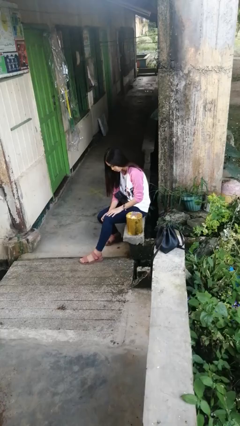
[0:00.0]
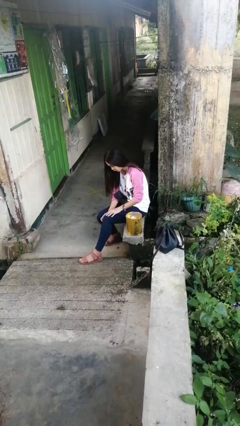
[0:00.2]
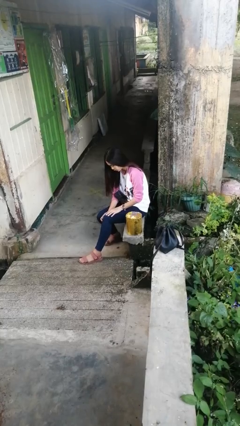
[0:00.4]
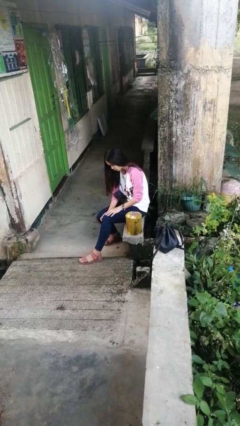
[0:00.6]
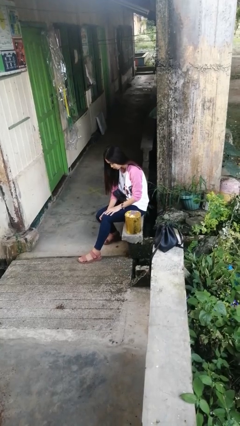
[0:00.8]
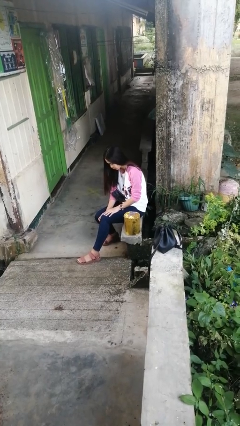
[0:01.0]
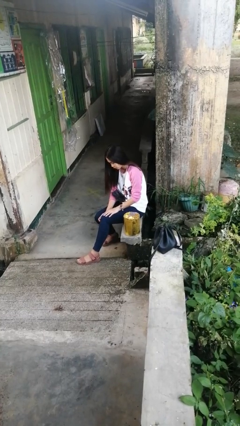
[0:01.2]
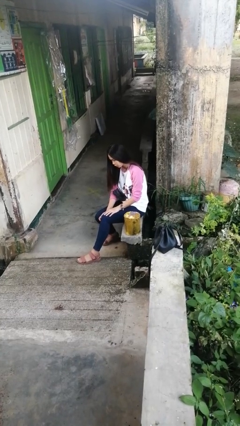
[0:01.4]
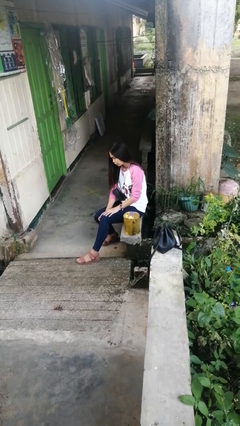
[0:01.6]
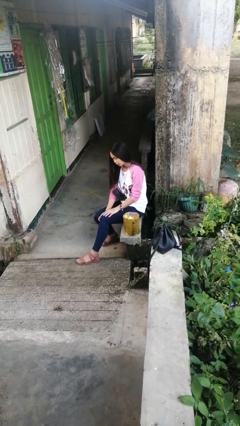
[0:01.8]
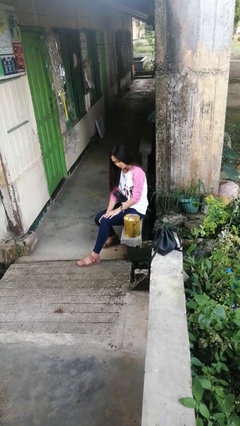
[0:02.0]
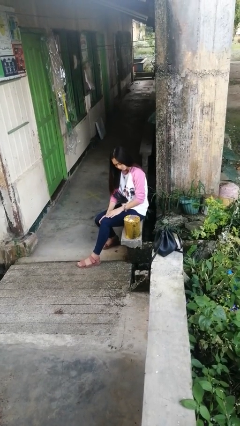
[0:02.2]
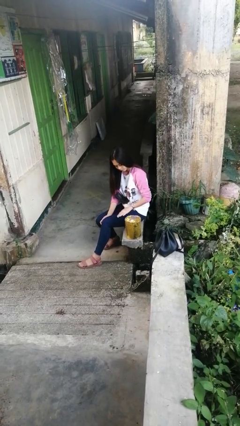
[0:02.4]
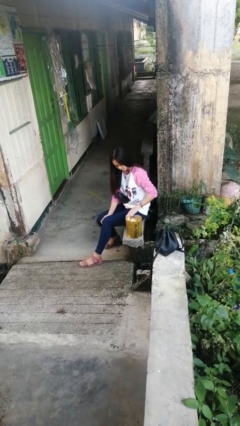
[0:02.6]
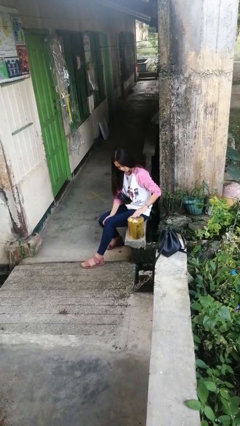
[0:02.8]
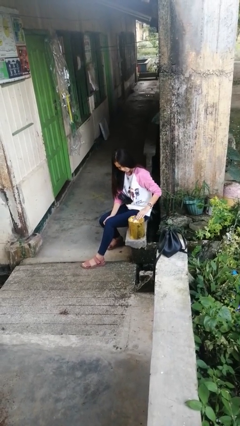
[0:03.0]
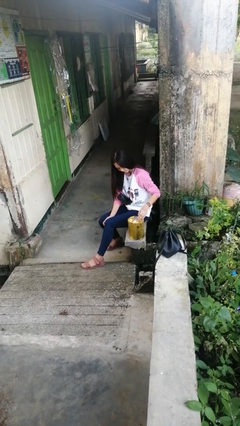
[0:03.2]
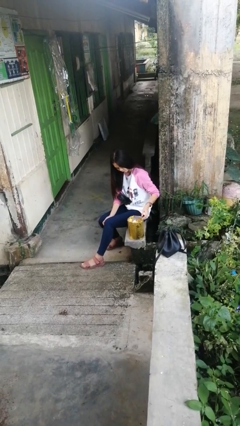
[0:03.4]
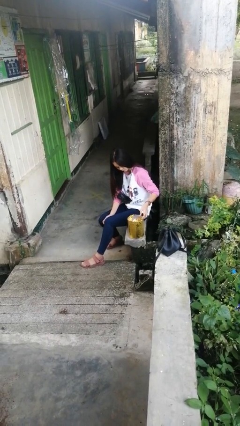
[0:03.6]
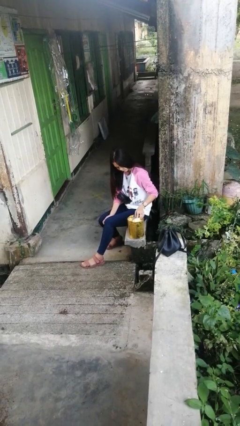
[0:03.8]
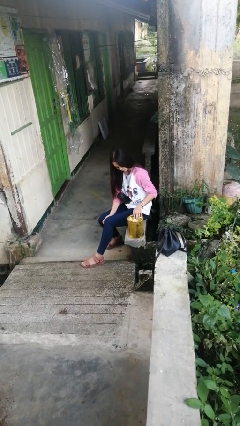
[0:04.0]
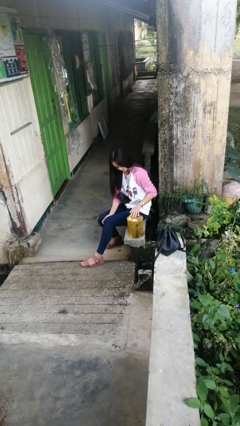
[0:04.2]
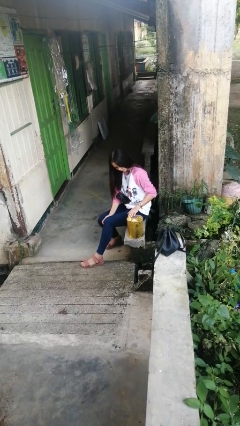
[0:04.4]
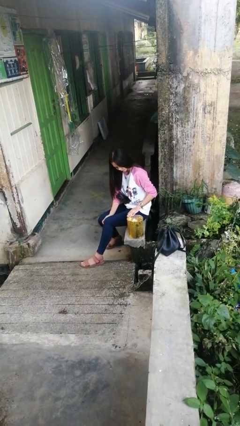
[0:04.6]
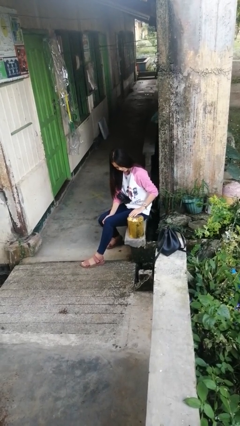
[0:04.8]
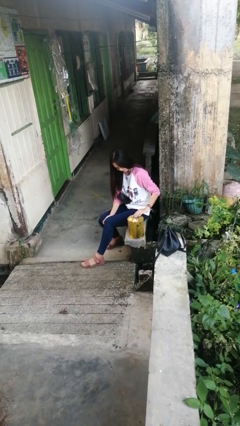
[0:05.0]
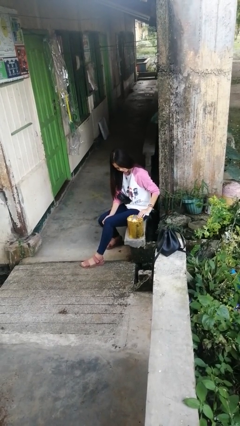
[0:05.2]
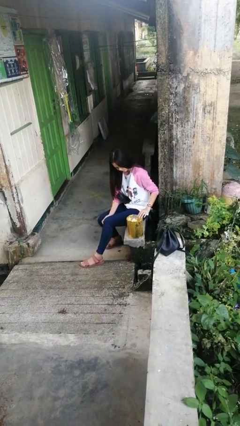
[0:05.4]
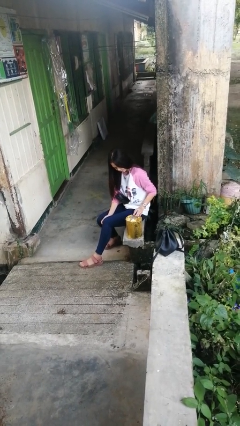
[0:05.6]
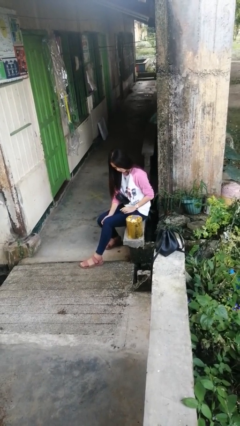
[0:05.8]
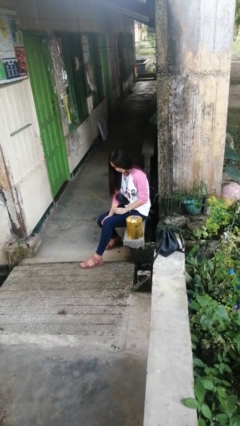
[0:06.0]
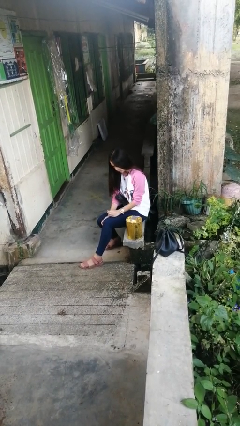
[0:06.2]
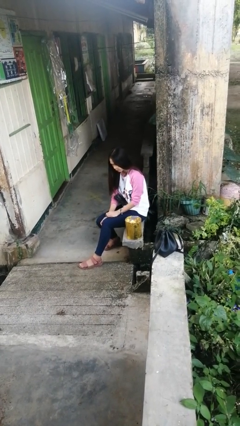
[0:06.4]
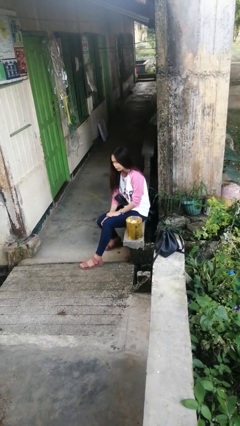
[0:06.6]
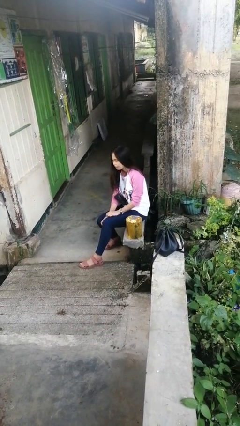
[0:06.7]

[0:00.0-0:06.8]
person waves hand over object

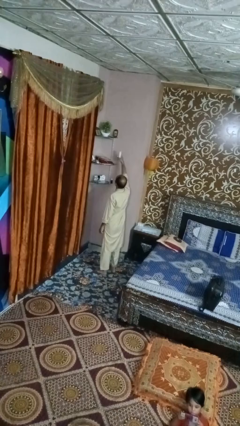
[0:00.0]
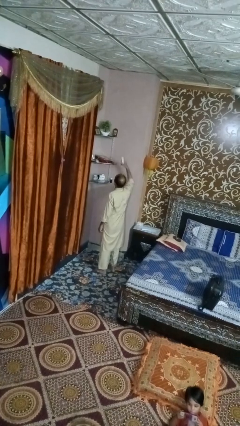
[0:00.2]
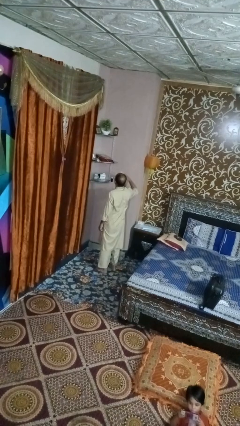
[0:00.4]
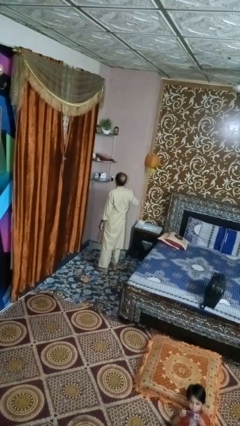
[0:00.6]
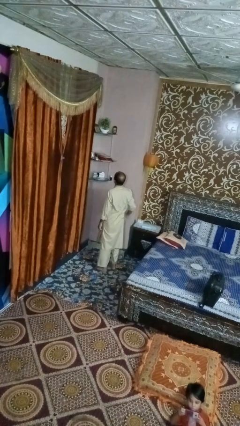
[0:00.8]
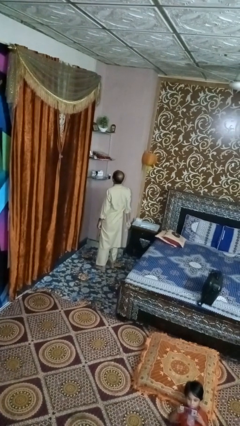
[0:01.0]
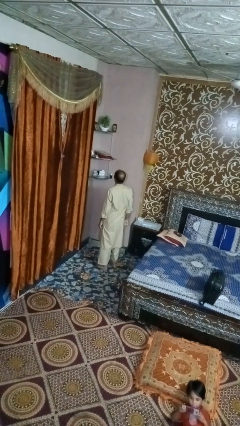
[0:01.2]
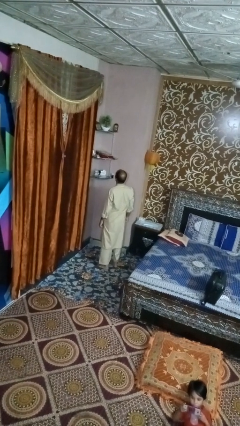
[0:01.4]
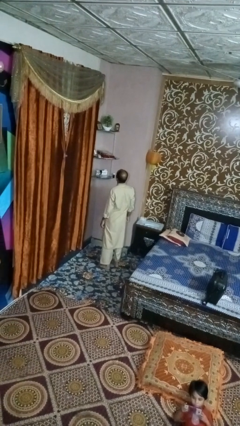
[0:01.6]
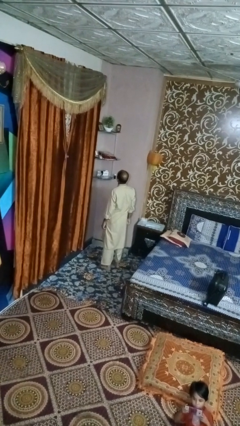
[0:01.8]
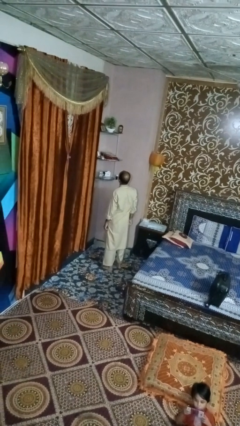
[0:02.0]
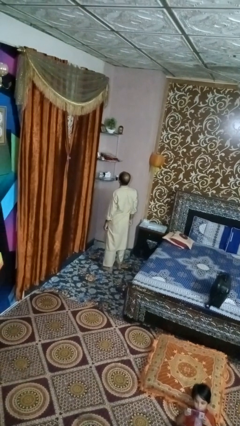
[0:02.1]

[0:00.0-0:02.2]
person puts down object on shelf

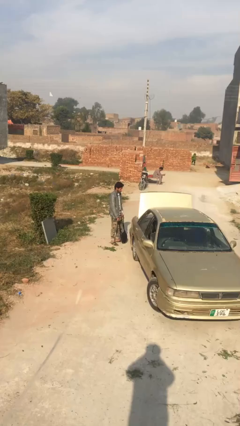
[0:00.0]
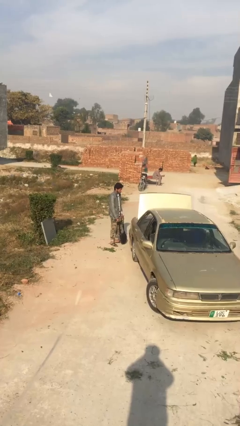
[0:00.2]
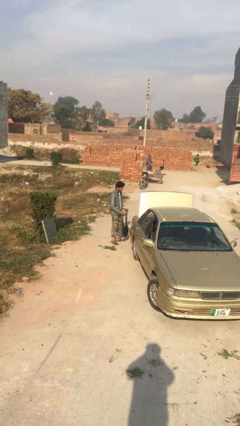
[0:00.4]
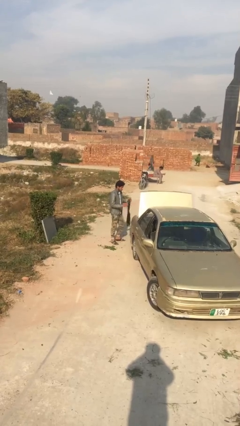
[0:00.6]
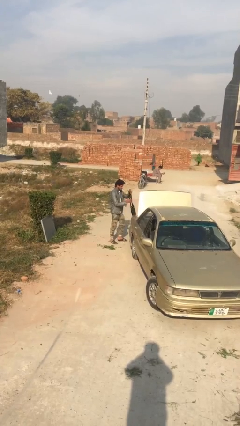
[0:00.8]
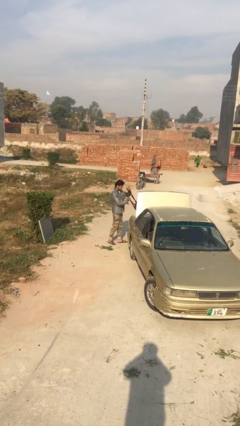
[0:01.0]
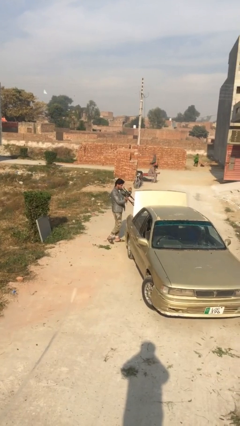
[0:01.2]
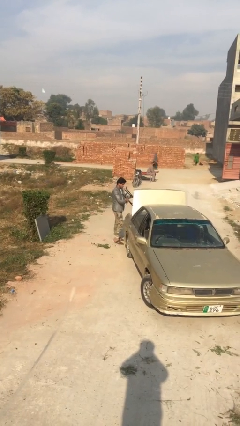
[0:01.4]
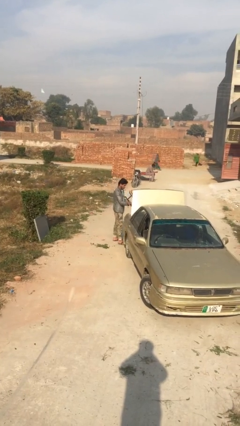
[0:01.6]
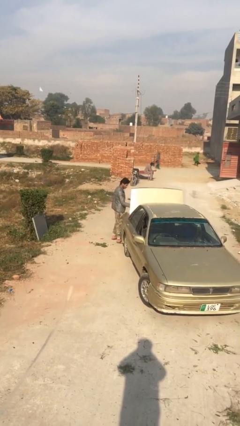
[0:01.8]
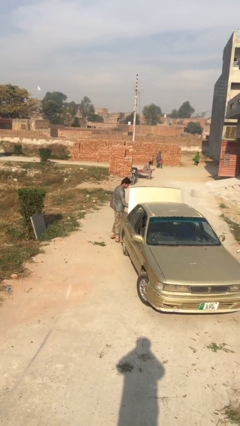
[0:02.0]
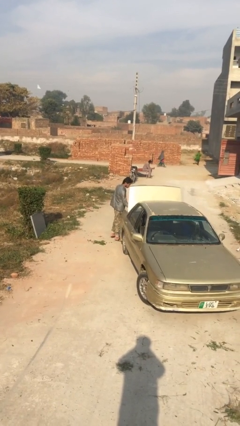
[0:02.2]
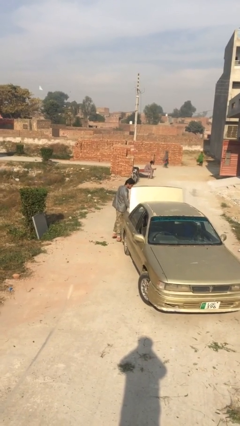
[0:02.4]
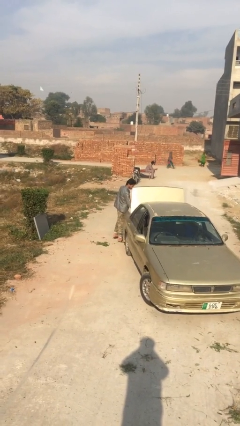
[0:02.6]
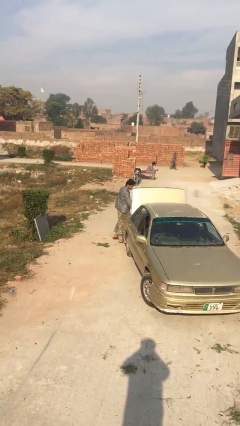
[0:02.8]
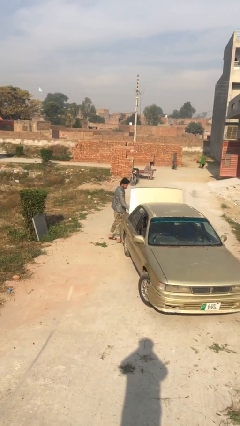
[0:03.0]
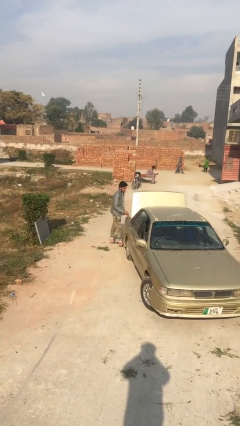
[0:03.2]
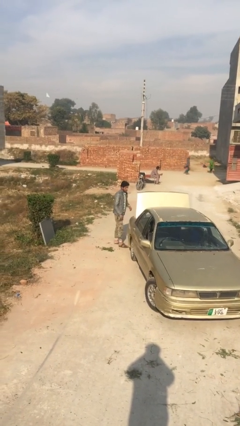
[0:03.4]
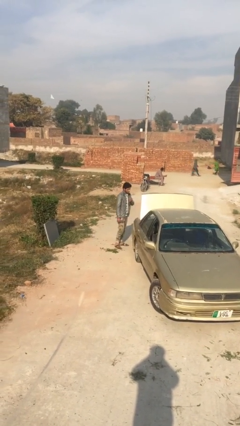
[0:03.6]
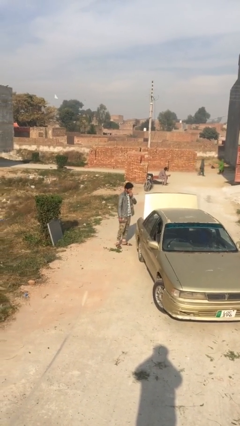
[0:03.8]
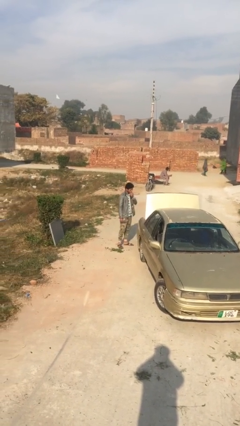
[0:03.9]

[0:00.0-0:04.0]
person loads car

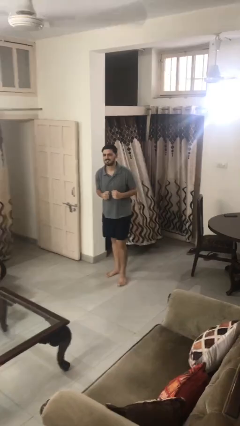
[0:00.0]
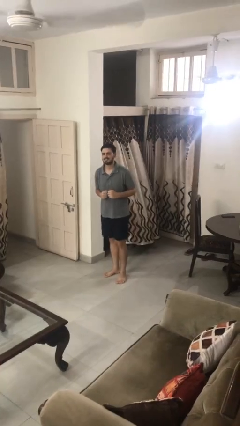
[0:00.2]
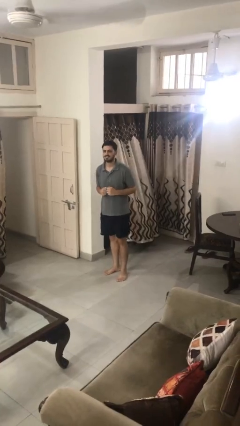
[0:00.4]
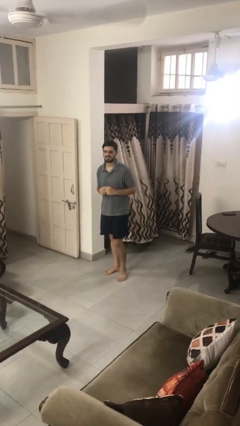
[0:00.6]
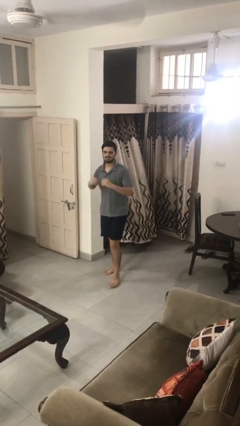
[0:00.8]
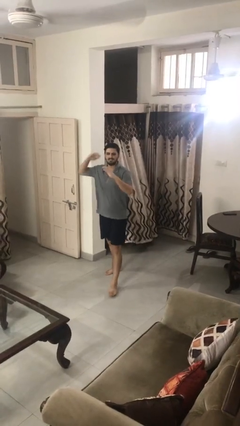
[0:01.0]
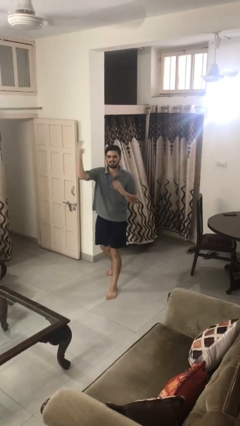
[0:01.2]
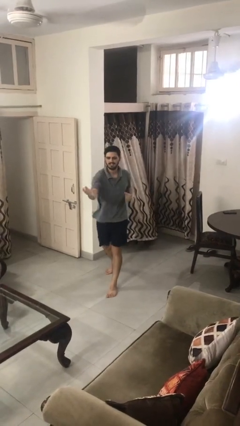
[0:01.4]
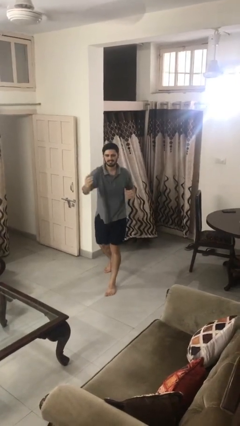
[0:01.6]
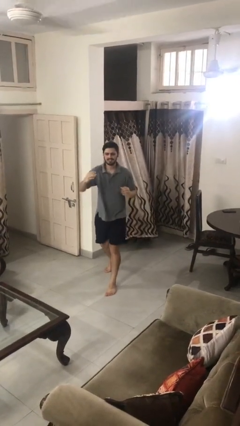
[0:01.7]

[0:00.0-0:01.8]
person karate chop

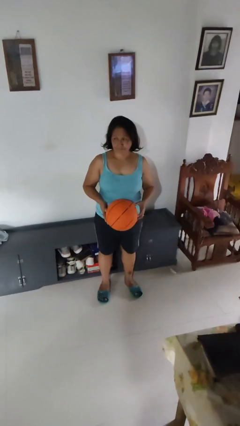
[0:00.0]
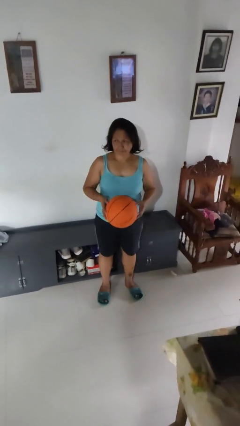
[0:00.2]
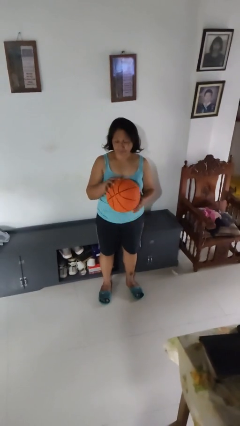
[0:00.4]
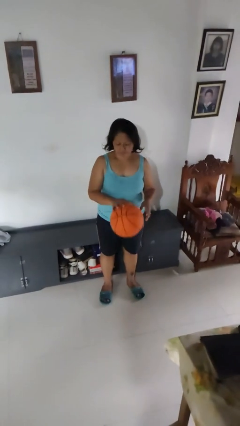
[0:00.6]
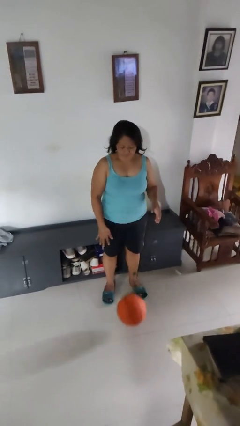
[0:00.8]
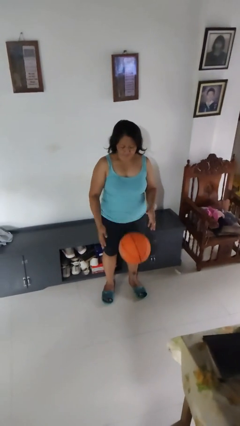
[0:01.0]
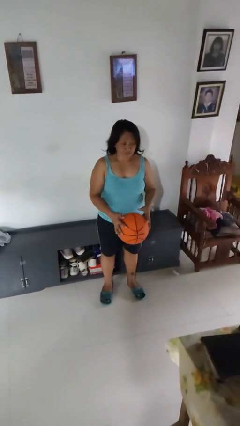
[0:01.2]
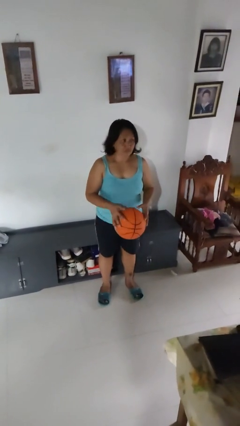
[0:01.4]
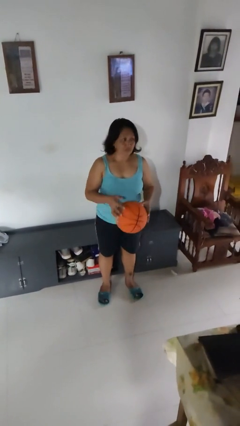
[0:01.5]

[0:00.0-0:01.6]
person bounces ball on floor

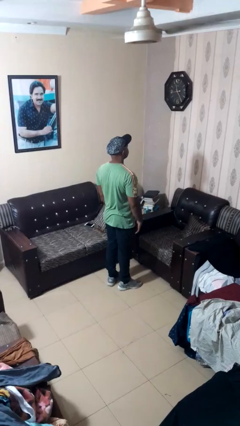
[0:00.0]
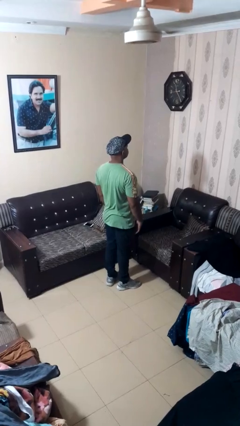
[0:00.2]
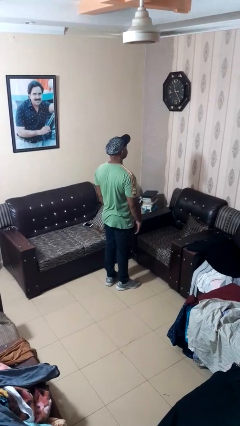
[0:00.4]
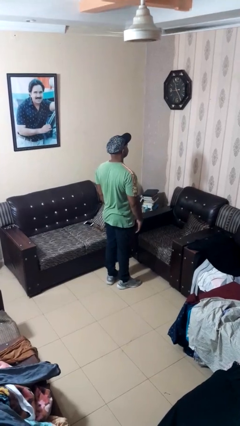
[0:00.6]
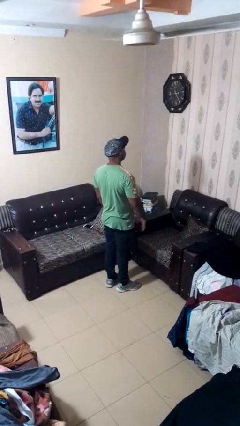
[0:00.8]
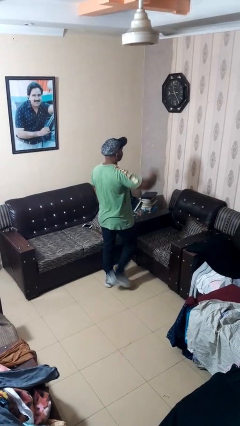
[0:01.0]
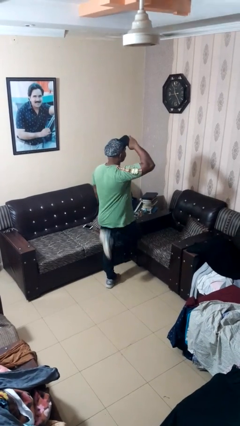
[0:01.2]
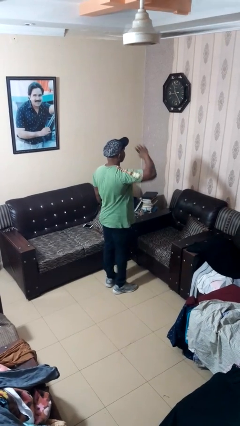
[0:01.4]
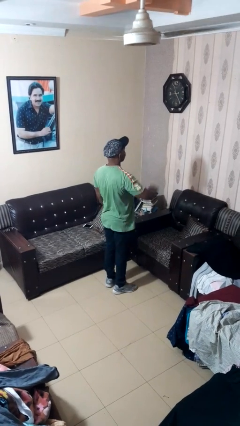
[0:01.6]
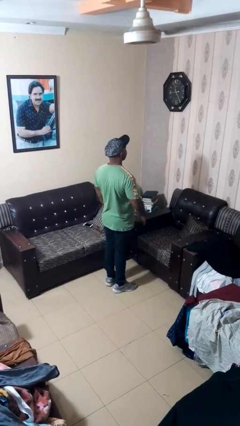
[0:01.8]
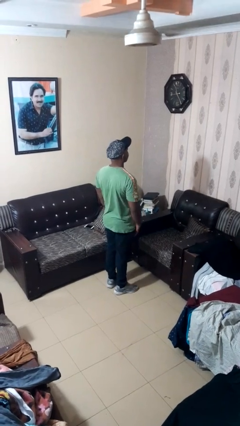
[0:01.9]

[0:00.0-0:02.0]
person salutes
